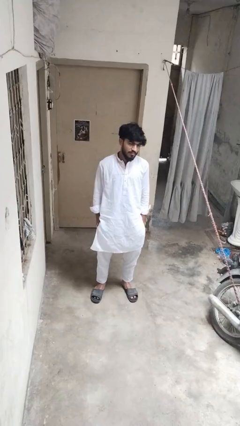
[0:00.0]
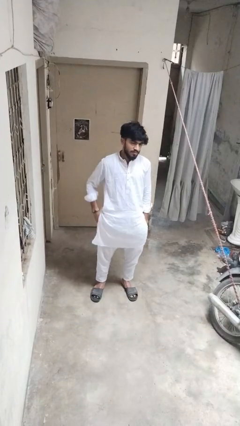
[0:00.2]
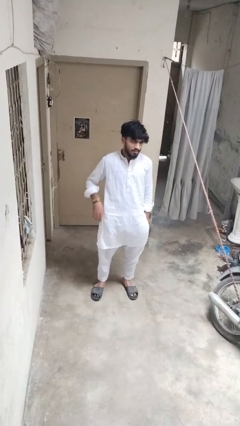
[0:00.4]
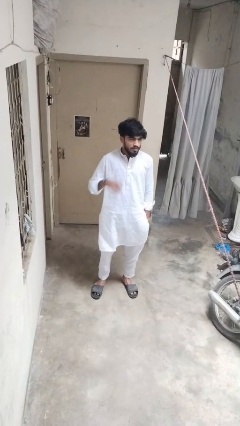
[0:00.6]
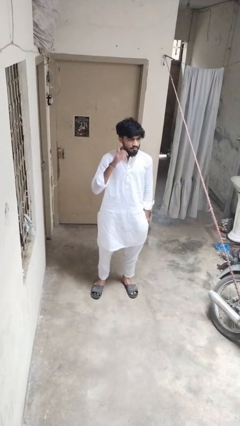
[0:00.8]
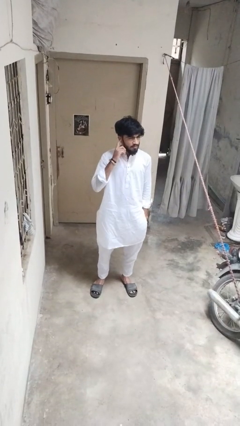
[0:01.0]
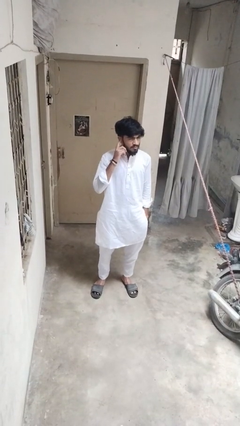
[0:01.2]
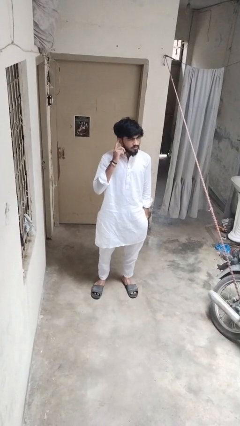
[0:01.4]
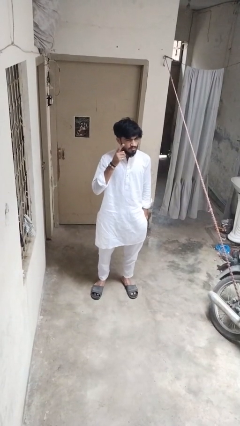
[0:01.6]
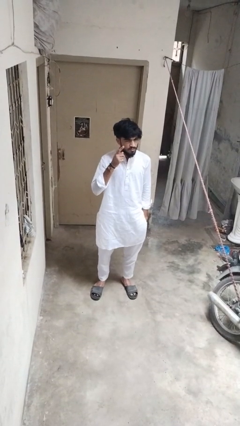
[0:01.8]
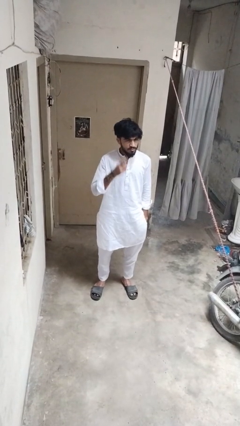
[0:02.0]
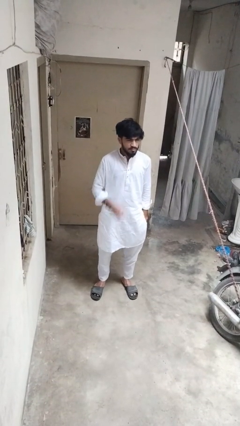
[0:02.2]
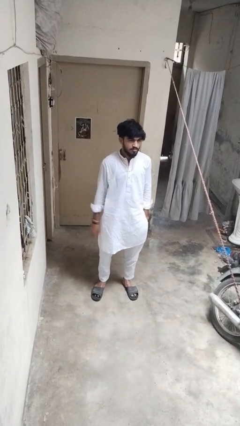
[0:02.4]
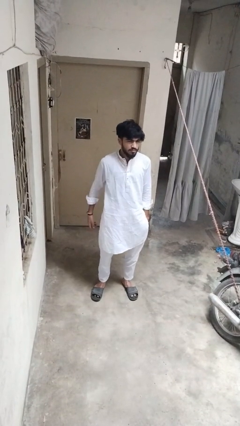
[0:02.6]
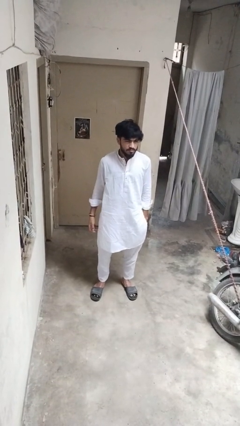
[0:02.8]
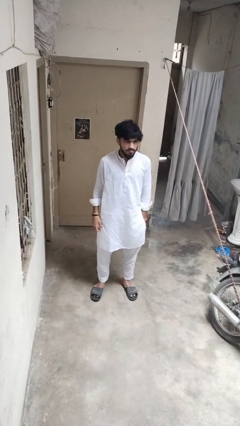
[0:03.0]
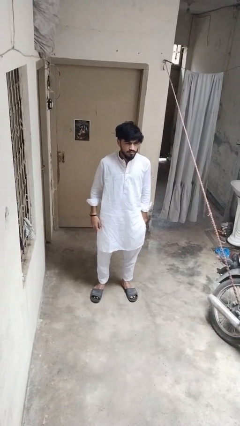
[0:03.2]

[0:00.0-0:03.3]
person gestures listen closely

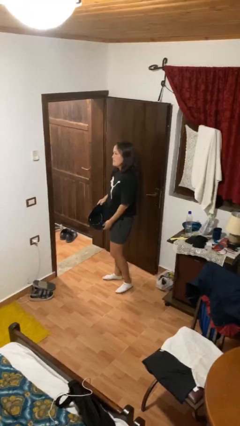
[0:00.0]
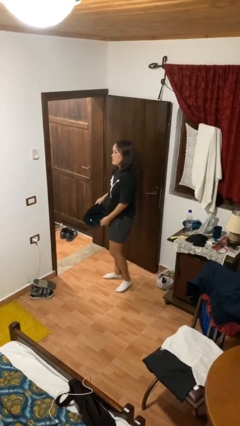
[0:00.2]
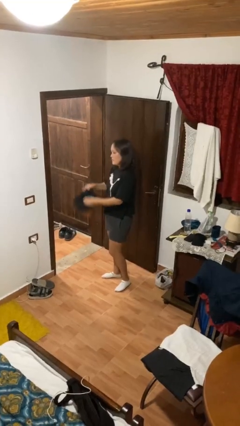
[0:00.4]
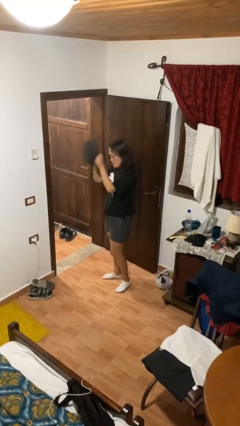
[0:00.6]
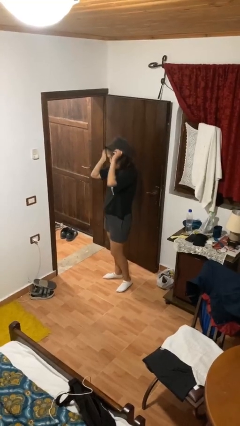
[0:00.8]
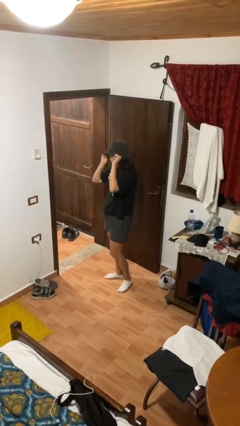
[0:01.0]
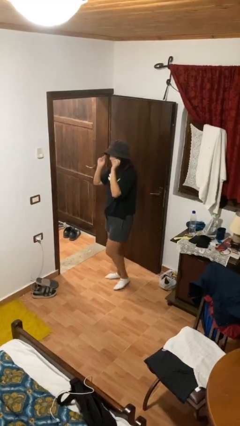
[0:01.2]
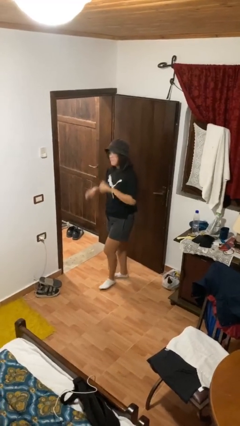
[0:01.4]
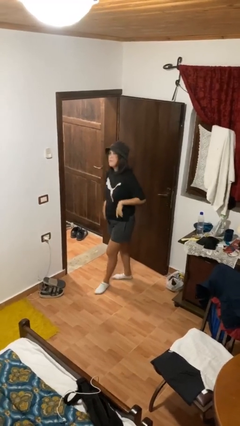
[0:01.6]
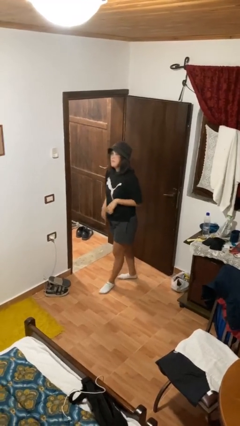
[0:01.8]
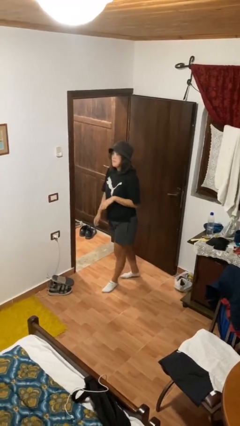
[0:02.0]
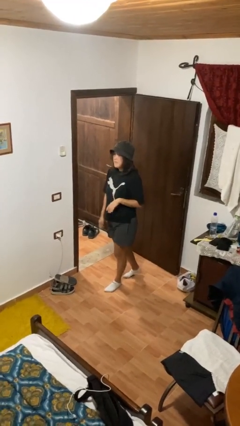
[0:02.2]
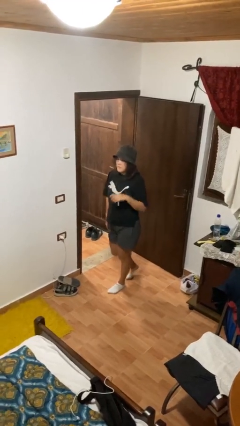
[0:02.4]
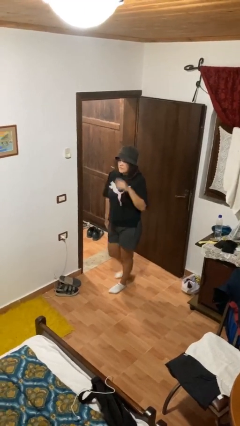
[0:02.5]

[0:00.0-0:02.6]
person puts on hat

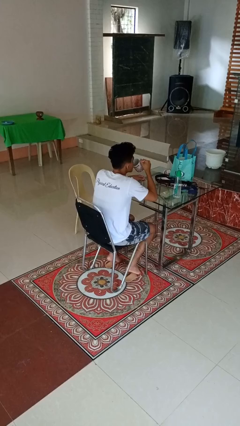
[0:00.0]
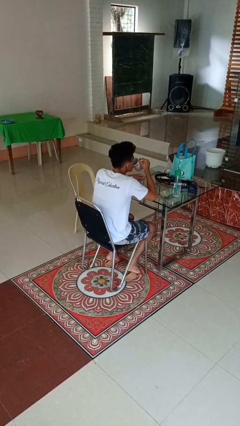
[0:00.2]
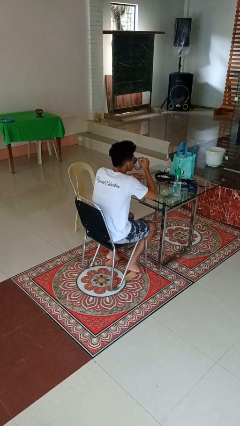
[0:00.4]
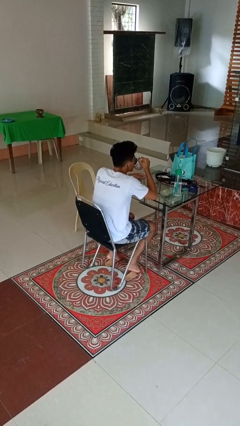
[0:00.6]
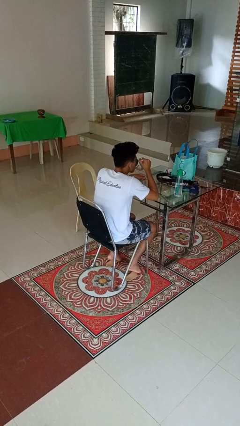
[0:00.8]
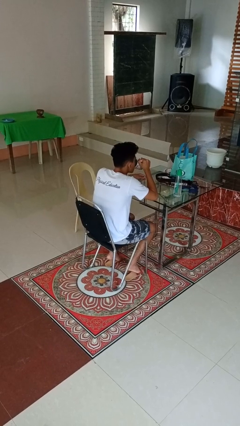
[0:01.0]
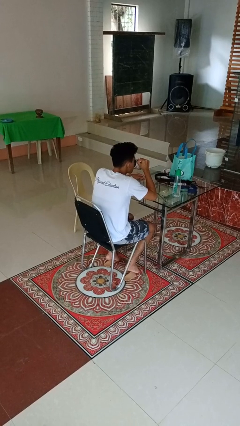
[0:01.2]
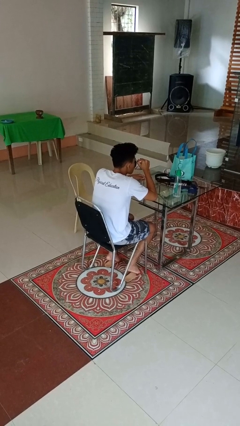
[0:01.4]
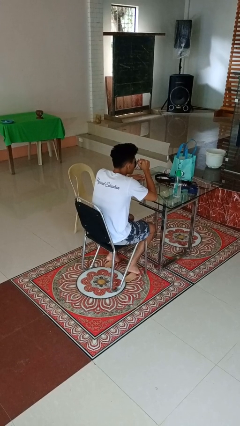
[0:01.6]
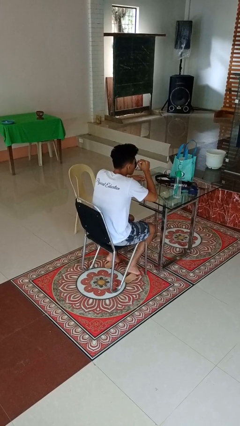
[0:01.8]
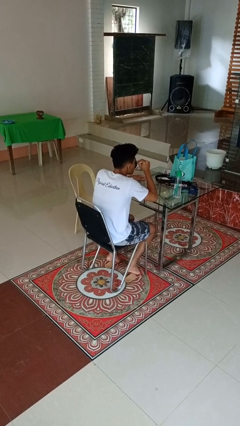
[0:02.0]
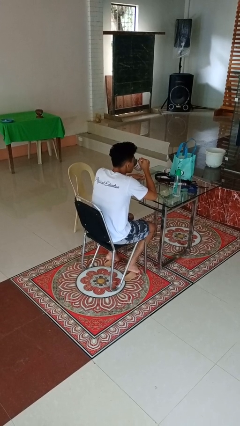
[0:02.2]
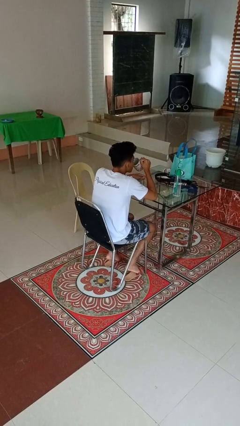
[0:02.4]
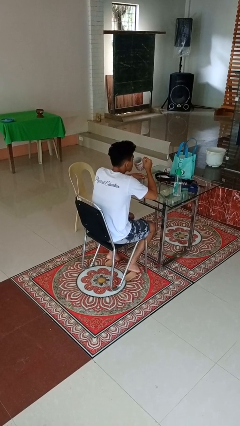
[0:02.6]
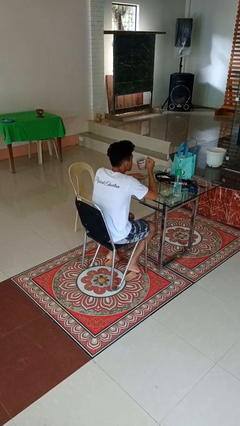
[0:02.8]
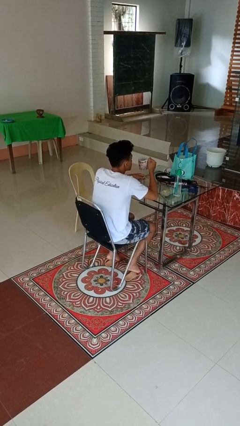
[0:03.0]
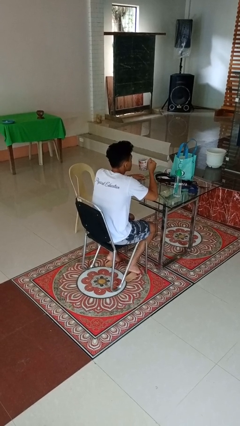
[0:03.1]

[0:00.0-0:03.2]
person drinks from mug

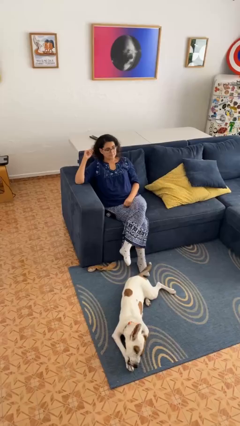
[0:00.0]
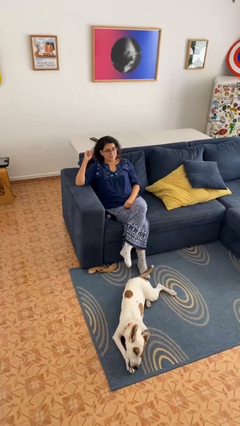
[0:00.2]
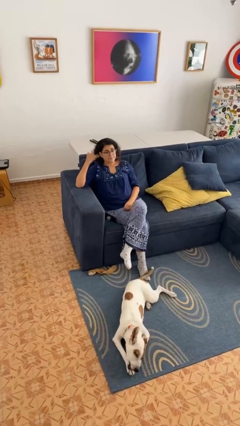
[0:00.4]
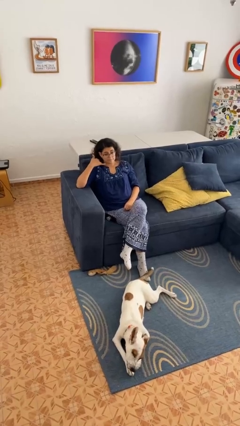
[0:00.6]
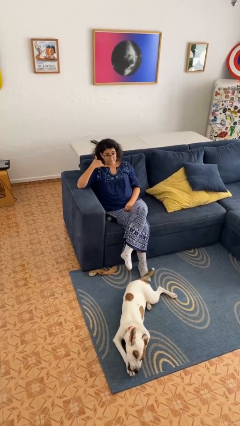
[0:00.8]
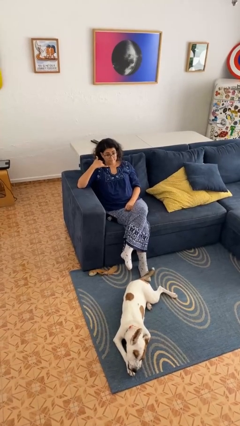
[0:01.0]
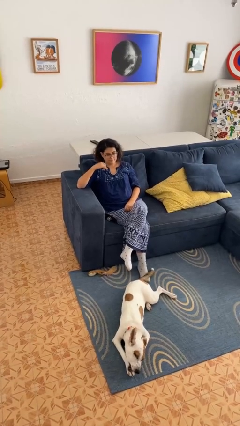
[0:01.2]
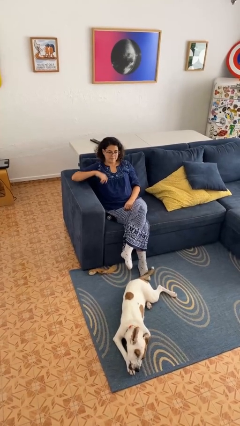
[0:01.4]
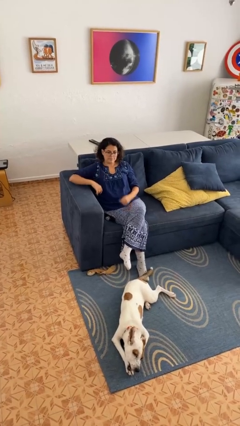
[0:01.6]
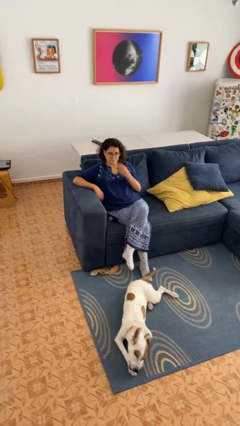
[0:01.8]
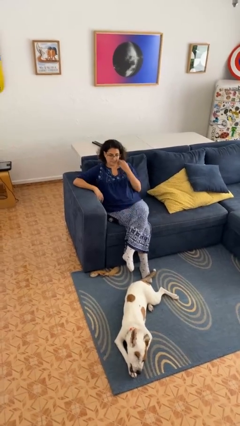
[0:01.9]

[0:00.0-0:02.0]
person gestures call me

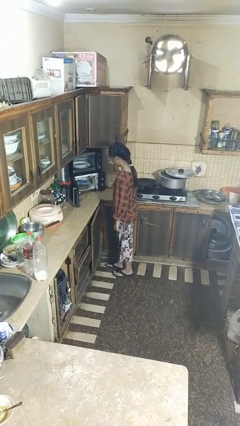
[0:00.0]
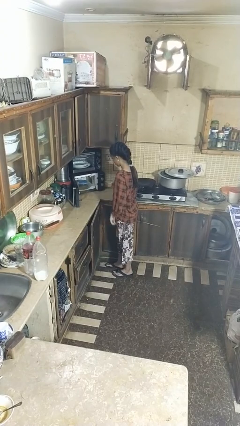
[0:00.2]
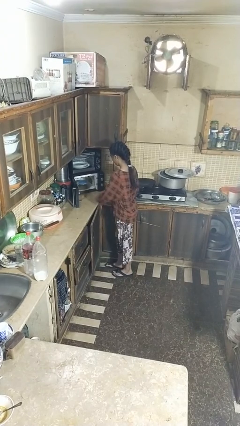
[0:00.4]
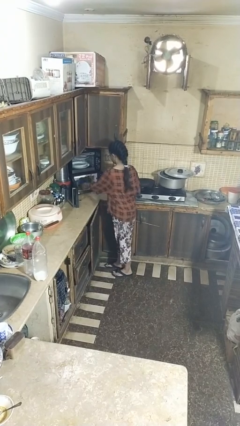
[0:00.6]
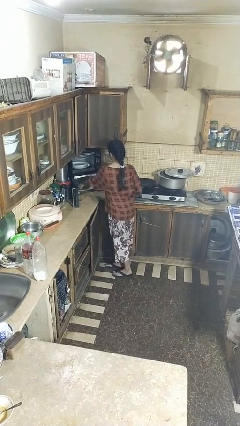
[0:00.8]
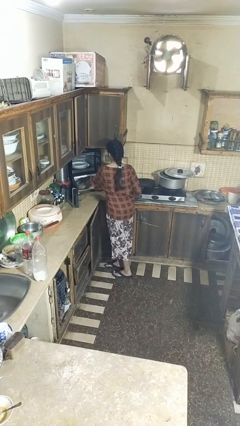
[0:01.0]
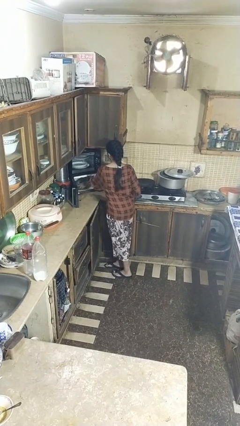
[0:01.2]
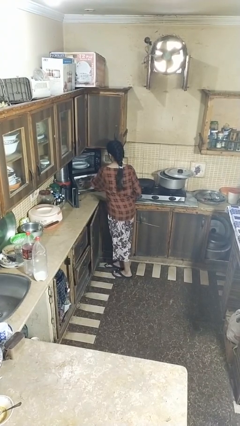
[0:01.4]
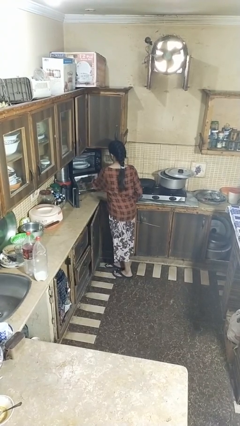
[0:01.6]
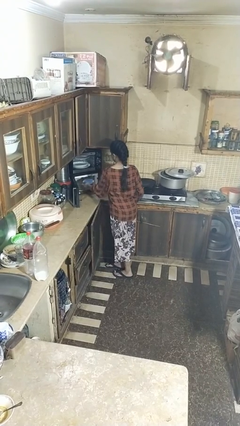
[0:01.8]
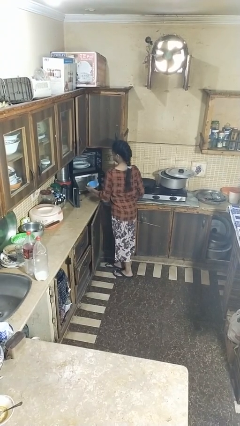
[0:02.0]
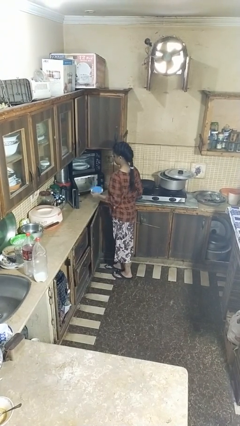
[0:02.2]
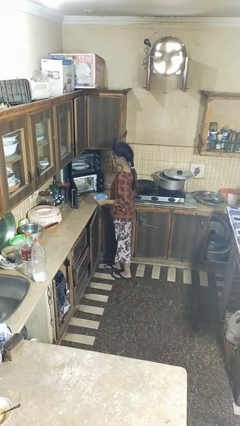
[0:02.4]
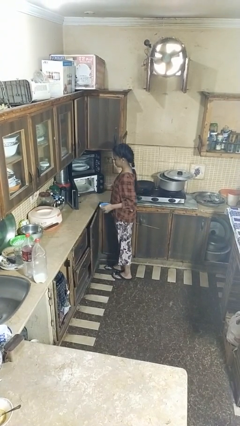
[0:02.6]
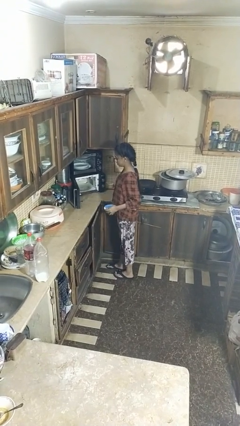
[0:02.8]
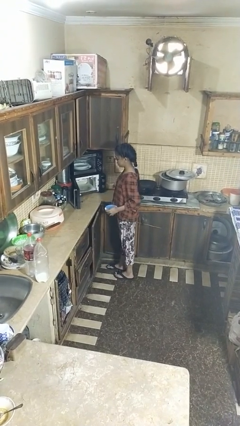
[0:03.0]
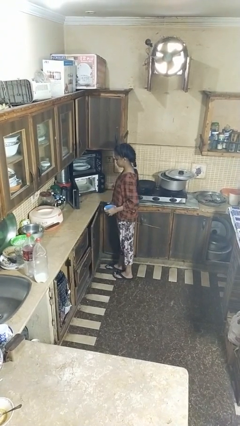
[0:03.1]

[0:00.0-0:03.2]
person takes object from microwave

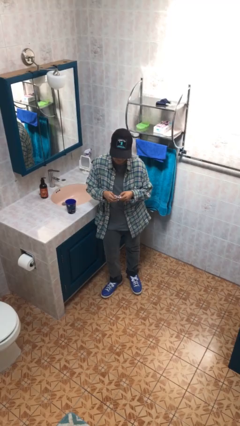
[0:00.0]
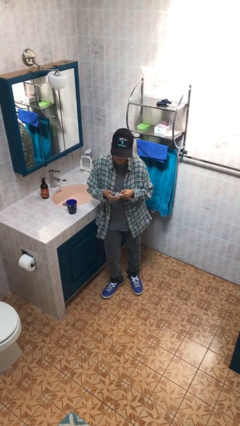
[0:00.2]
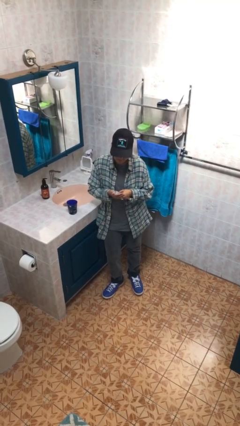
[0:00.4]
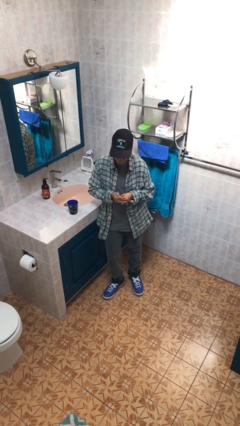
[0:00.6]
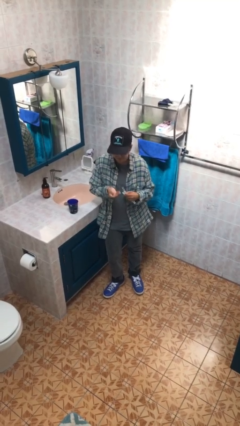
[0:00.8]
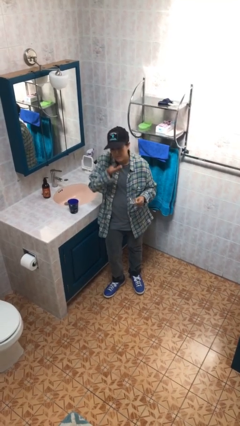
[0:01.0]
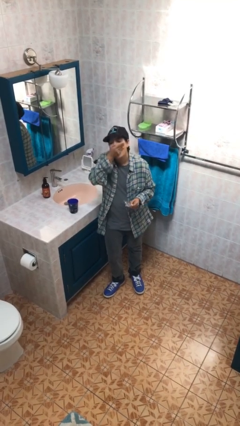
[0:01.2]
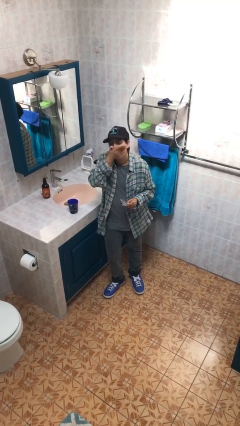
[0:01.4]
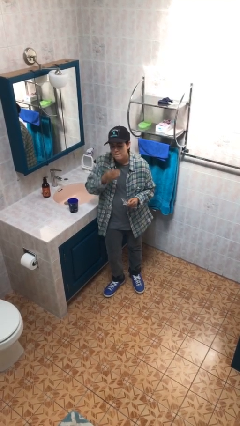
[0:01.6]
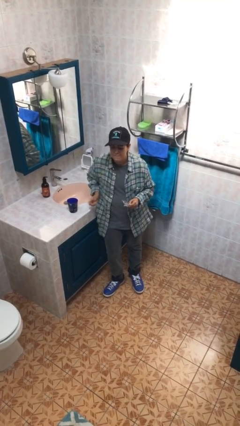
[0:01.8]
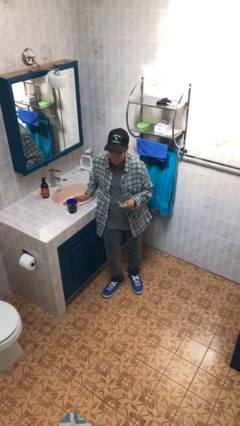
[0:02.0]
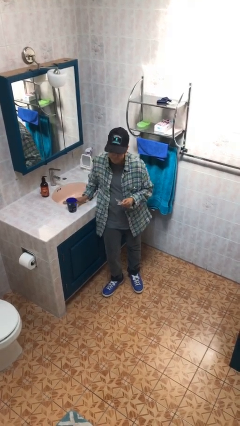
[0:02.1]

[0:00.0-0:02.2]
person takes medicine pills

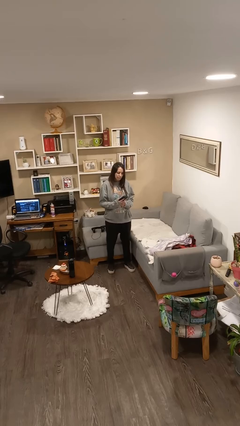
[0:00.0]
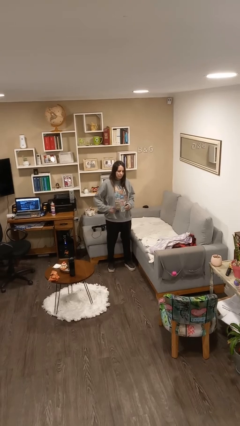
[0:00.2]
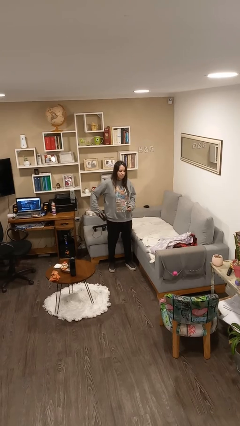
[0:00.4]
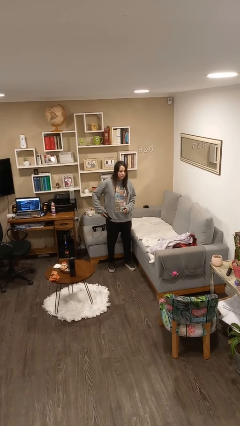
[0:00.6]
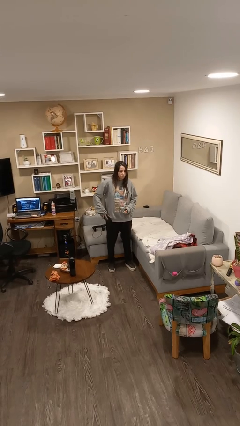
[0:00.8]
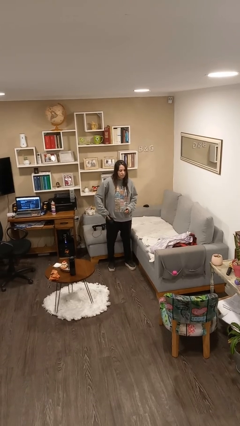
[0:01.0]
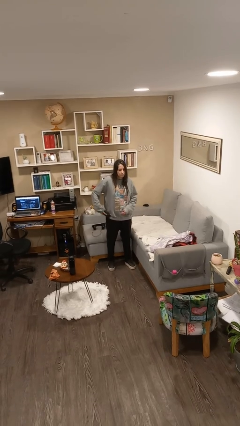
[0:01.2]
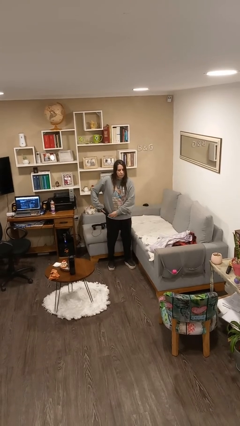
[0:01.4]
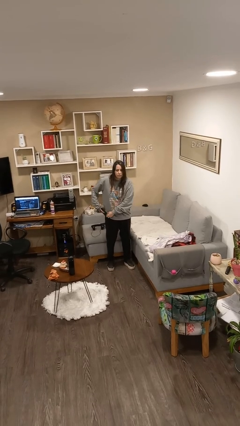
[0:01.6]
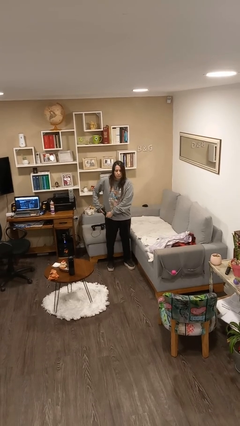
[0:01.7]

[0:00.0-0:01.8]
person puts phone into pocket
